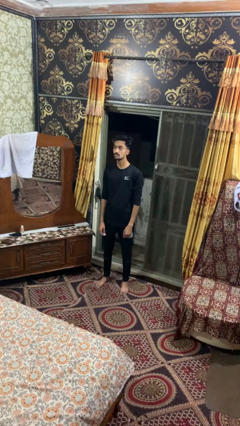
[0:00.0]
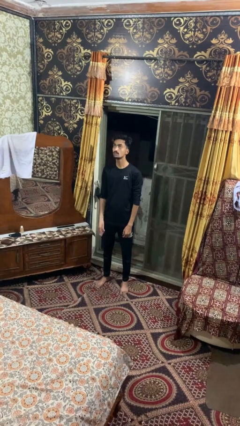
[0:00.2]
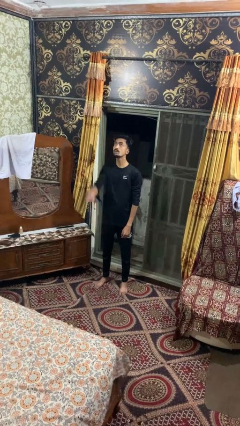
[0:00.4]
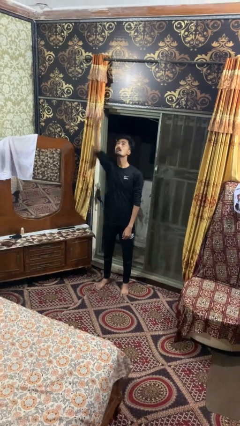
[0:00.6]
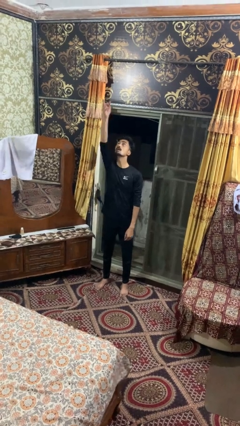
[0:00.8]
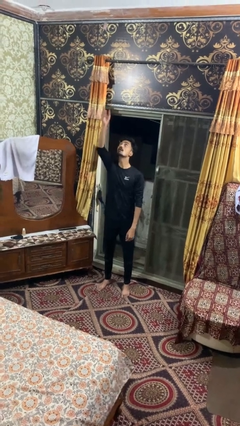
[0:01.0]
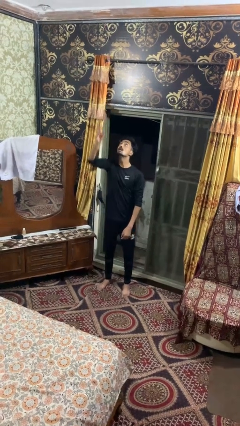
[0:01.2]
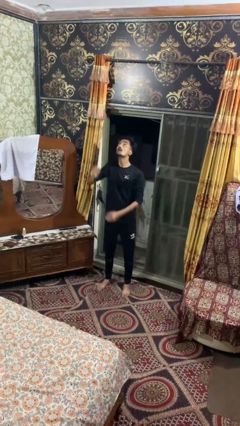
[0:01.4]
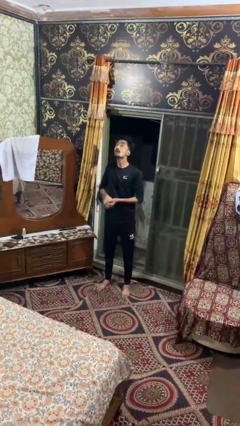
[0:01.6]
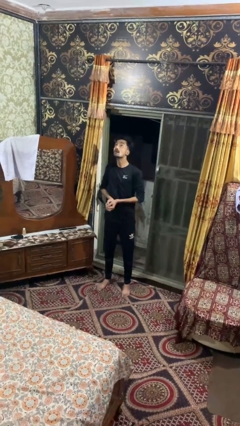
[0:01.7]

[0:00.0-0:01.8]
person drops object

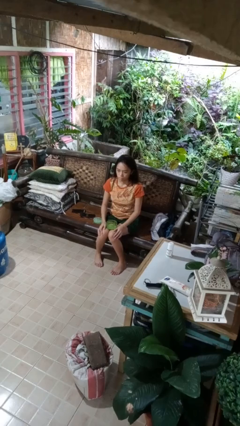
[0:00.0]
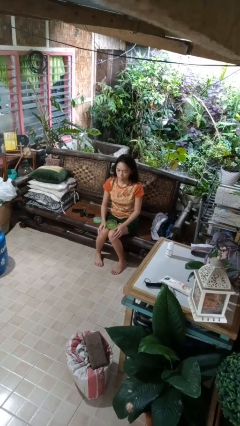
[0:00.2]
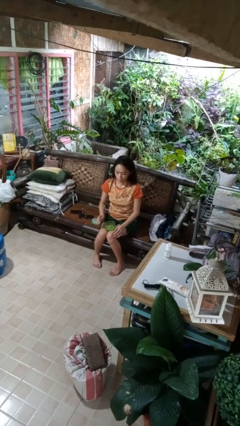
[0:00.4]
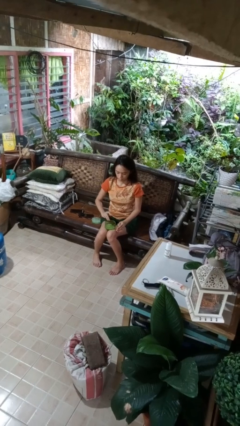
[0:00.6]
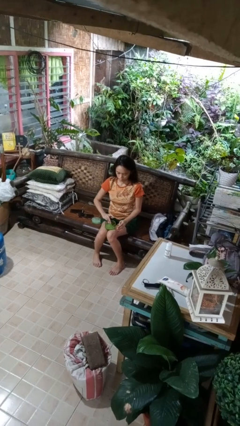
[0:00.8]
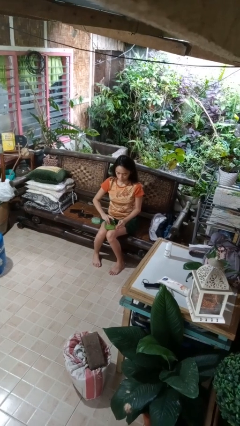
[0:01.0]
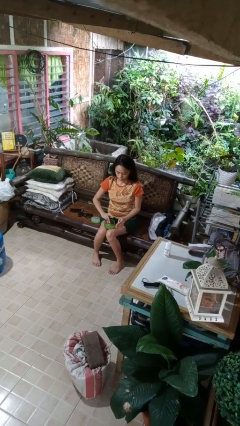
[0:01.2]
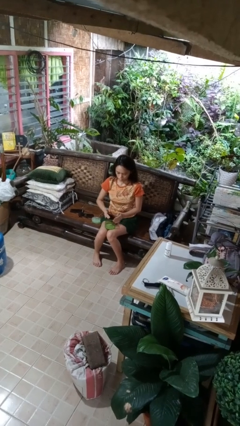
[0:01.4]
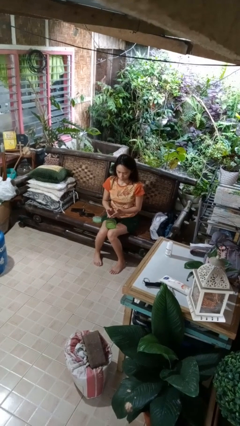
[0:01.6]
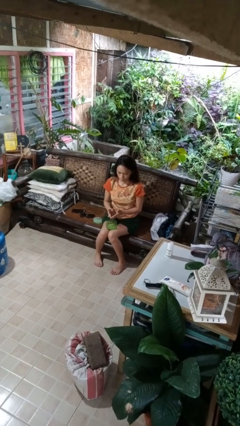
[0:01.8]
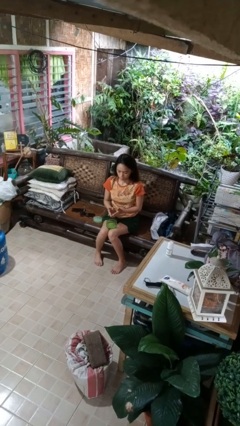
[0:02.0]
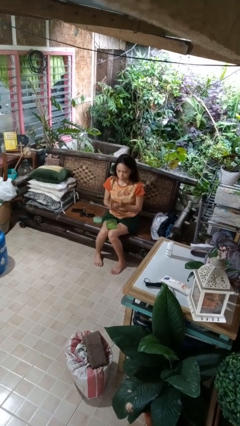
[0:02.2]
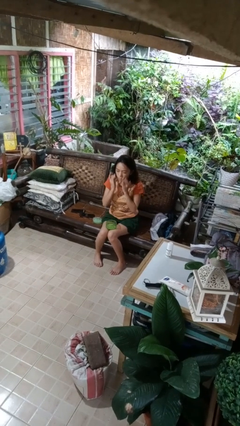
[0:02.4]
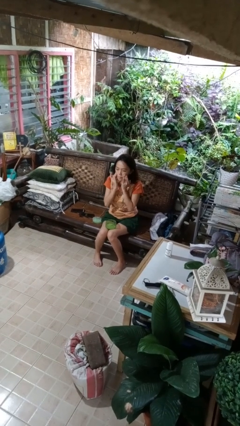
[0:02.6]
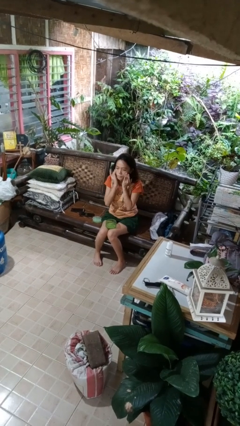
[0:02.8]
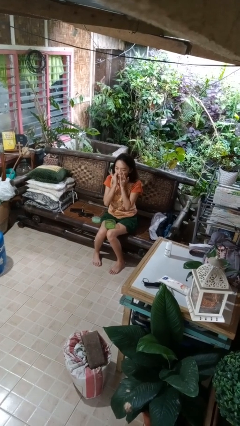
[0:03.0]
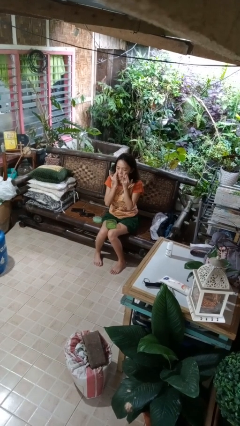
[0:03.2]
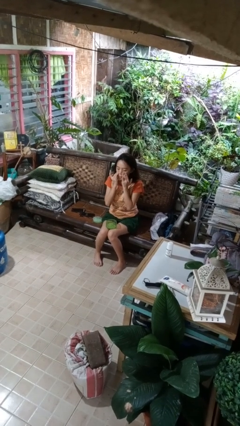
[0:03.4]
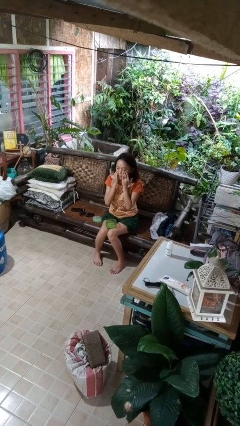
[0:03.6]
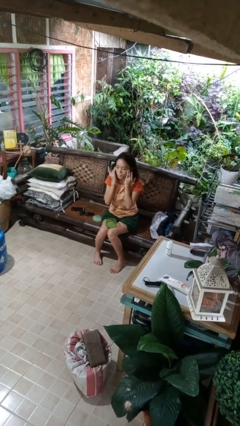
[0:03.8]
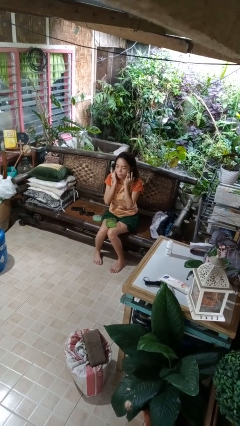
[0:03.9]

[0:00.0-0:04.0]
person applies facial moisturizer

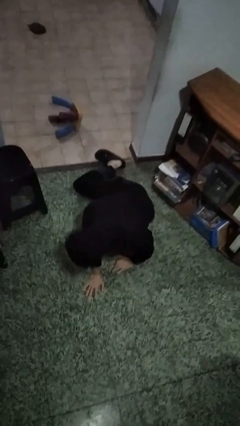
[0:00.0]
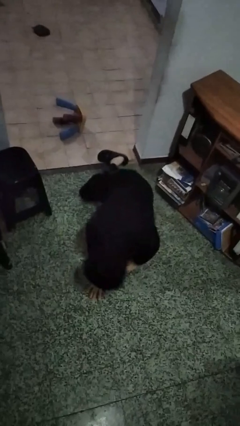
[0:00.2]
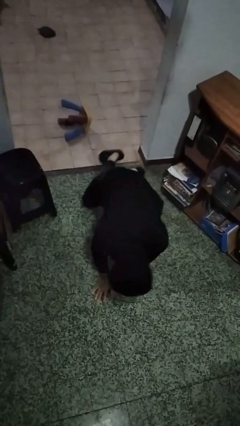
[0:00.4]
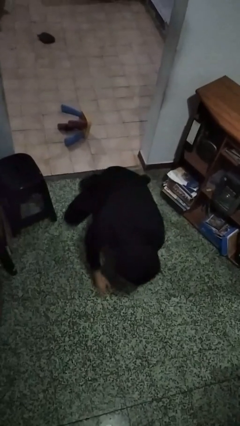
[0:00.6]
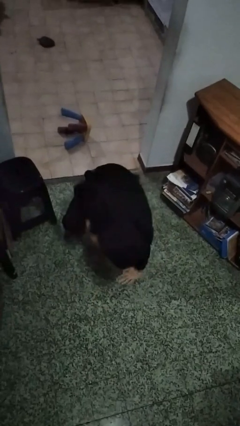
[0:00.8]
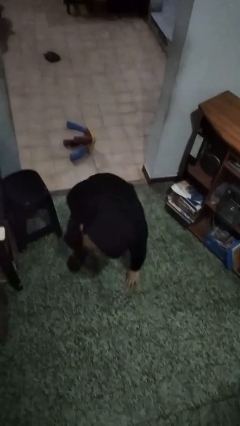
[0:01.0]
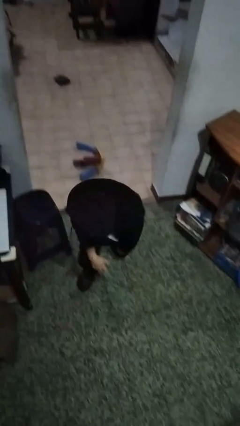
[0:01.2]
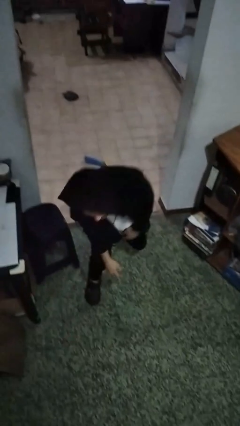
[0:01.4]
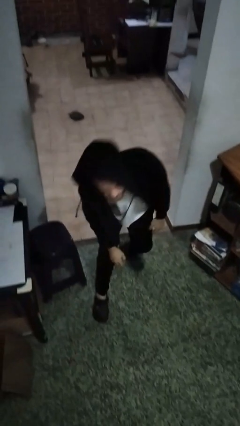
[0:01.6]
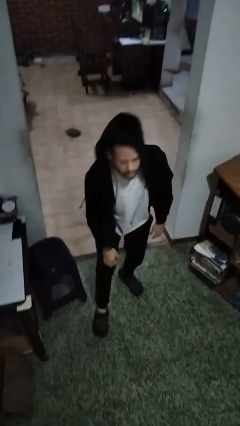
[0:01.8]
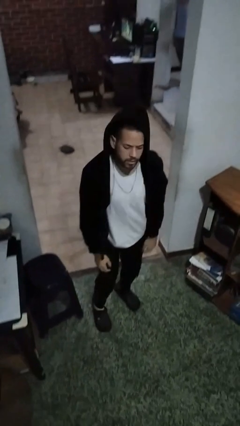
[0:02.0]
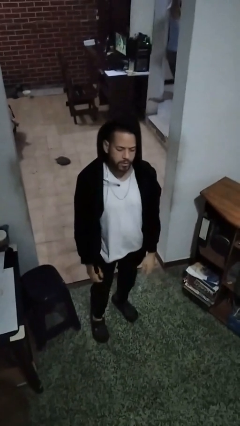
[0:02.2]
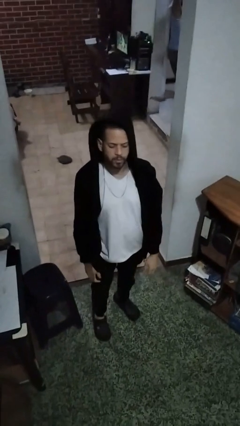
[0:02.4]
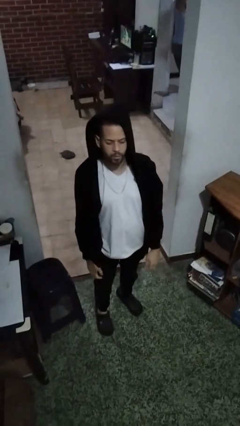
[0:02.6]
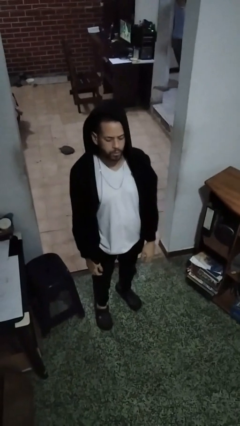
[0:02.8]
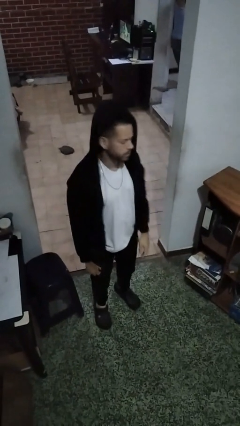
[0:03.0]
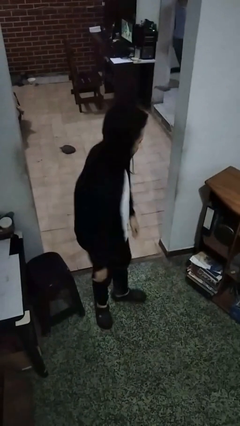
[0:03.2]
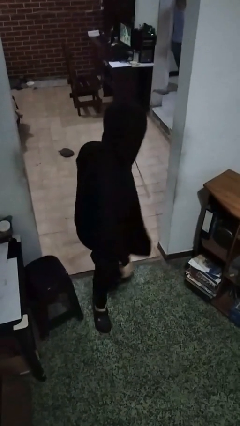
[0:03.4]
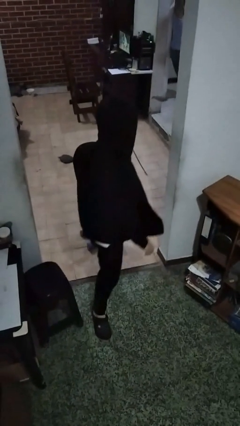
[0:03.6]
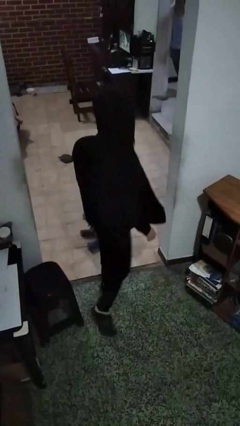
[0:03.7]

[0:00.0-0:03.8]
person stands up from floor

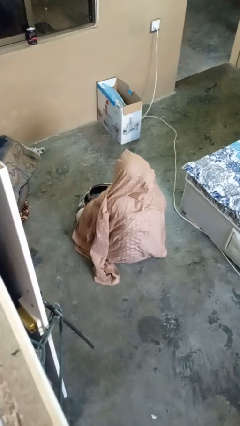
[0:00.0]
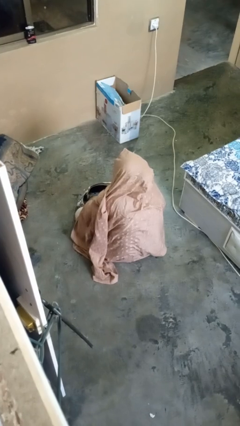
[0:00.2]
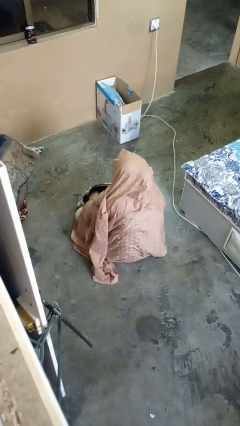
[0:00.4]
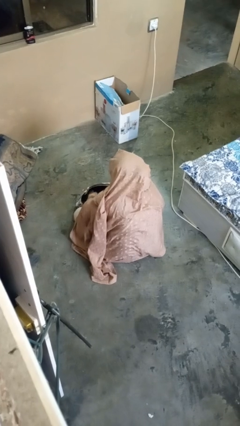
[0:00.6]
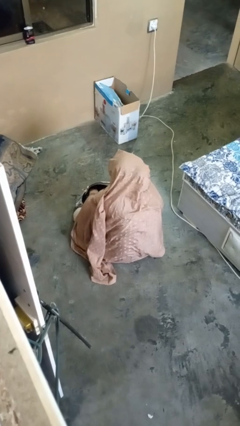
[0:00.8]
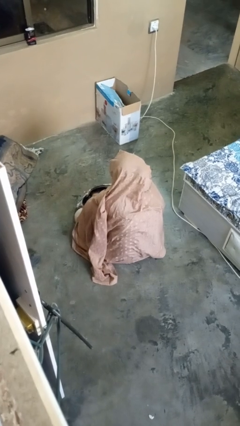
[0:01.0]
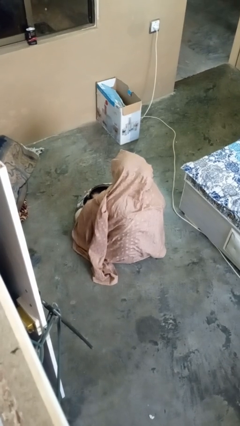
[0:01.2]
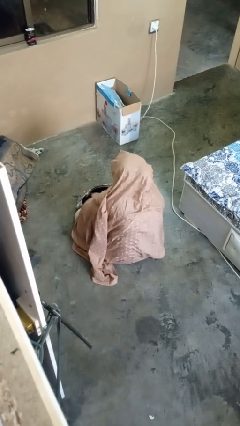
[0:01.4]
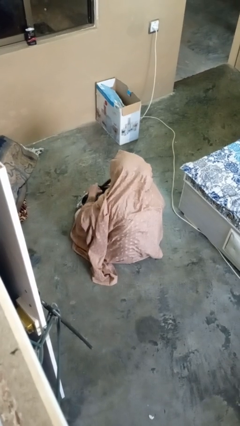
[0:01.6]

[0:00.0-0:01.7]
person searches in purse

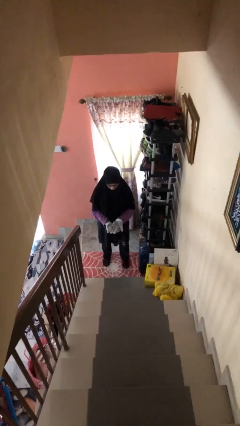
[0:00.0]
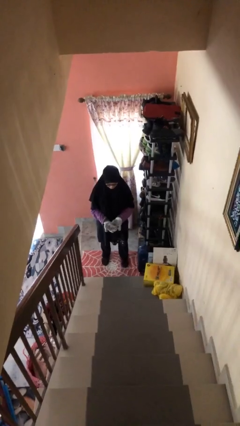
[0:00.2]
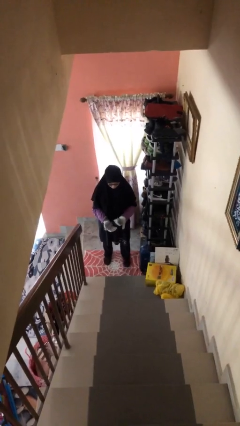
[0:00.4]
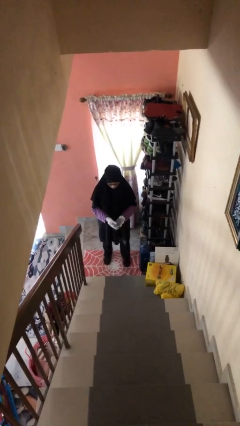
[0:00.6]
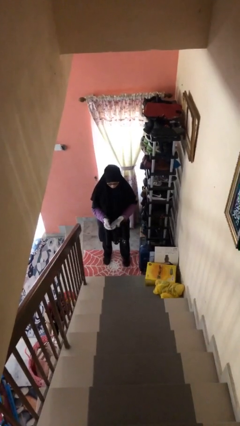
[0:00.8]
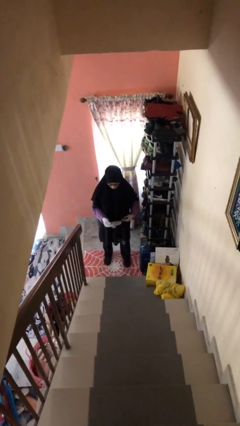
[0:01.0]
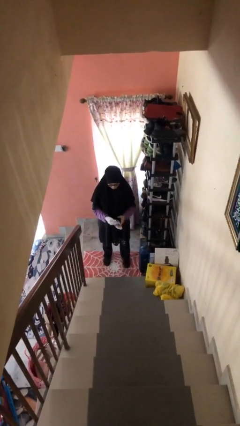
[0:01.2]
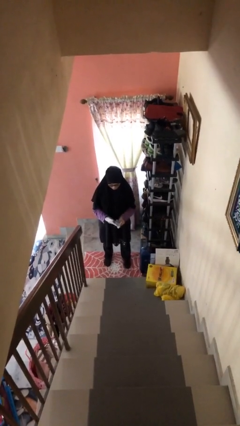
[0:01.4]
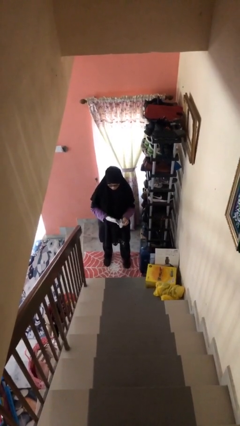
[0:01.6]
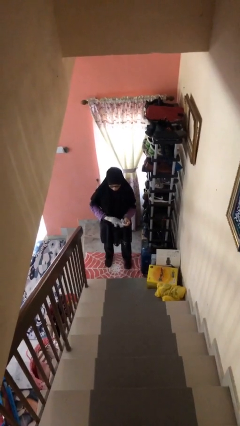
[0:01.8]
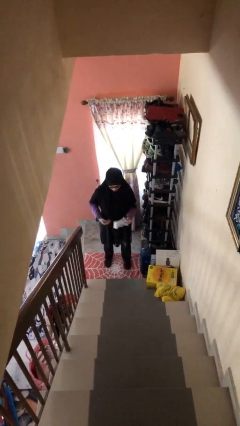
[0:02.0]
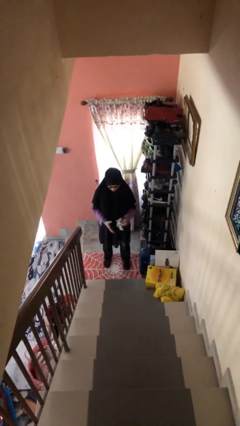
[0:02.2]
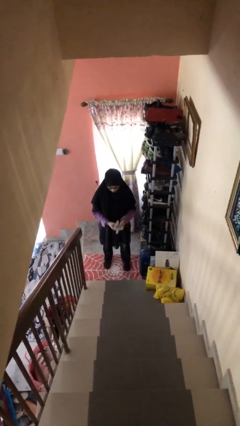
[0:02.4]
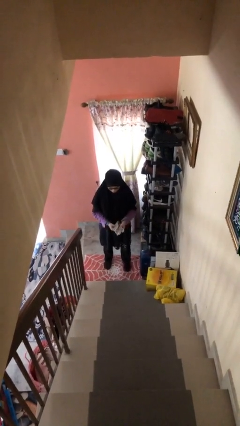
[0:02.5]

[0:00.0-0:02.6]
person takes off gloves

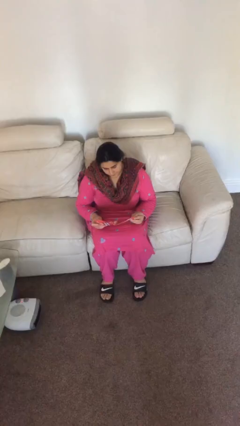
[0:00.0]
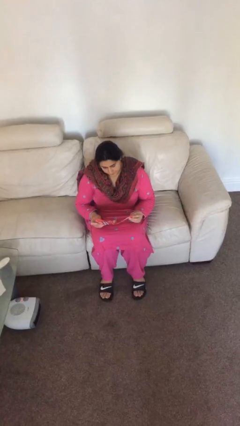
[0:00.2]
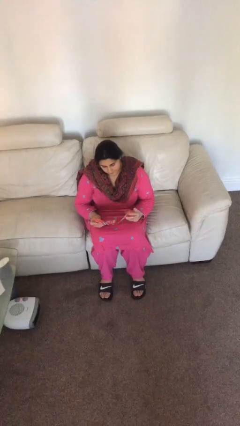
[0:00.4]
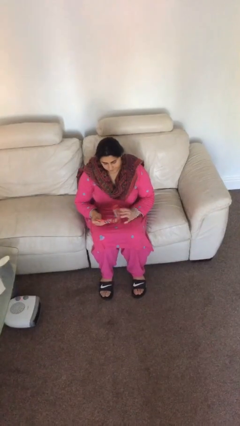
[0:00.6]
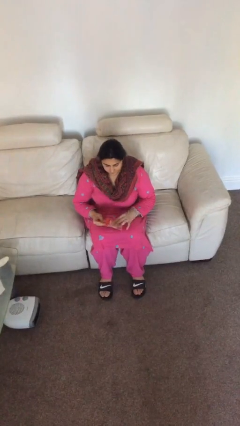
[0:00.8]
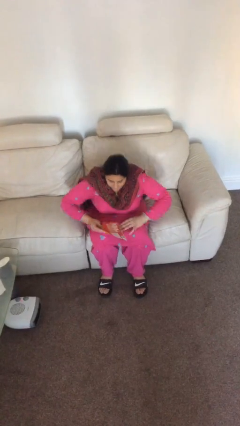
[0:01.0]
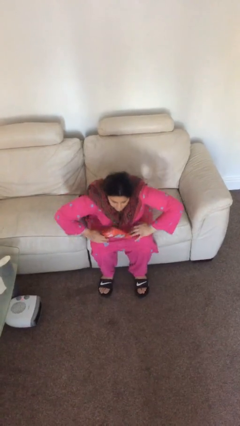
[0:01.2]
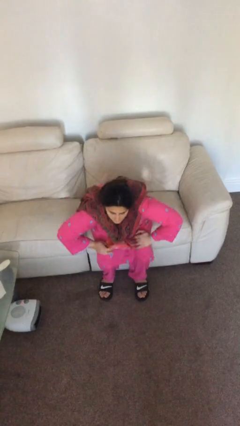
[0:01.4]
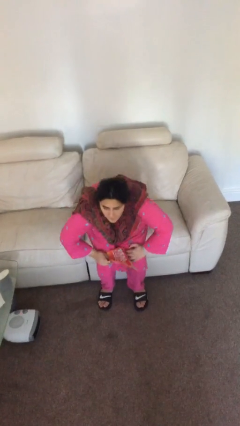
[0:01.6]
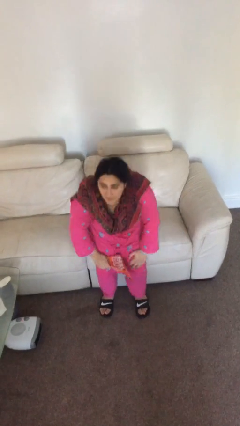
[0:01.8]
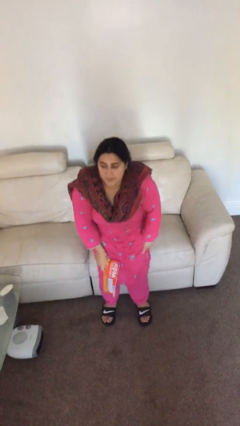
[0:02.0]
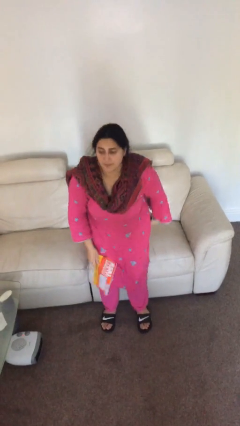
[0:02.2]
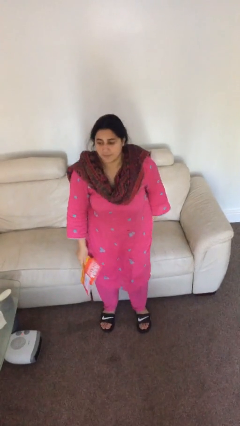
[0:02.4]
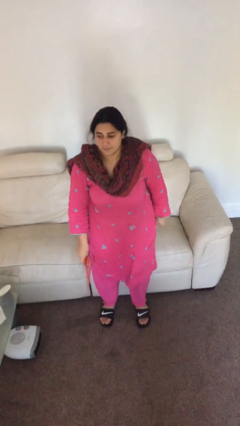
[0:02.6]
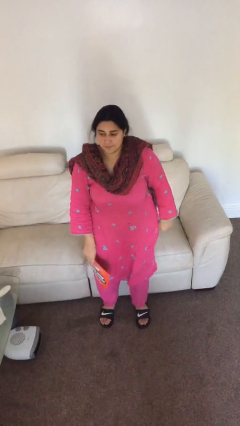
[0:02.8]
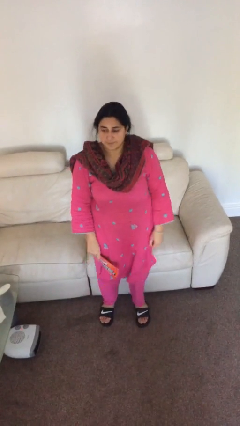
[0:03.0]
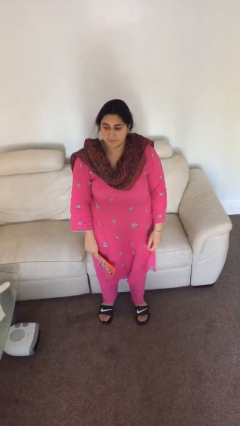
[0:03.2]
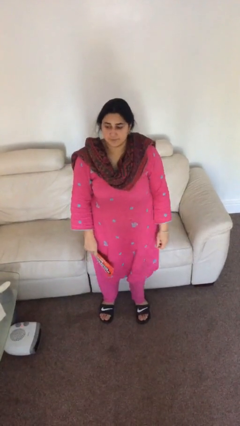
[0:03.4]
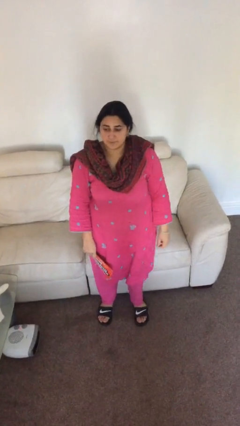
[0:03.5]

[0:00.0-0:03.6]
person stands up
